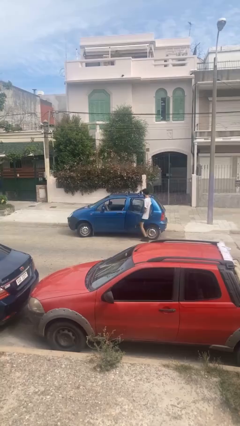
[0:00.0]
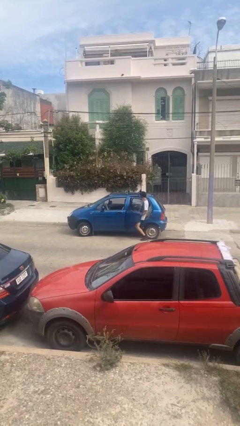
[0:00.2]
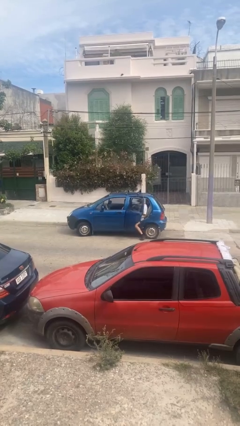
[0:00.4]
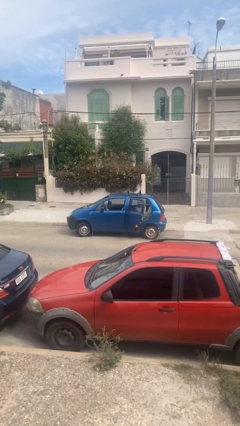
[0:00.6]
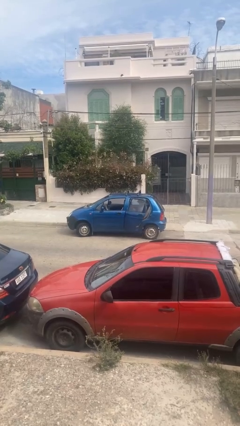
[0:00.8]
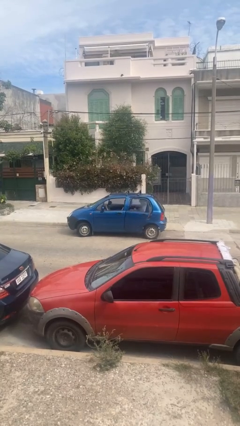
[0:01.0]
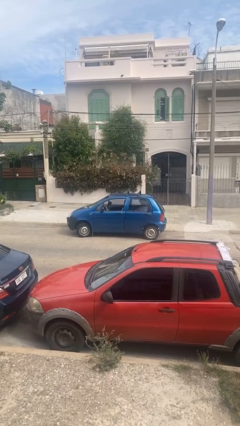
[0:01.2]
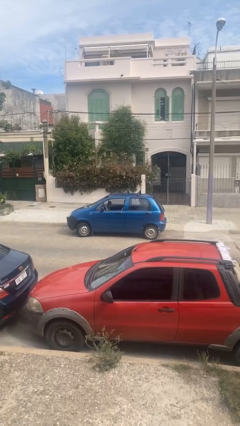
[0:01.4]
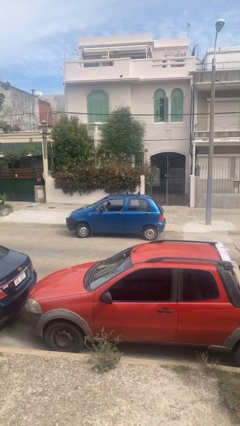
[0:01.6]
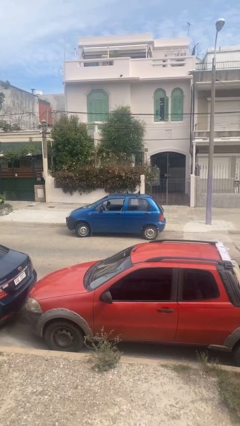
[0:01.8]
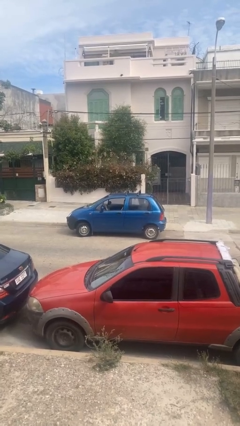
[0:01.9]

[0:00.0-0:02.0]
car picks up person

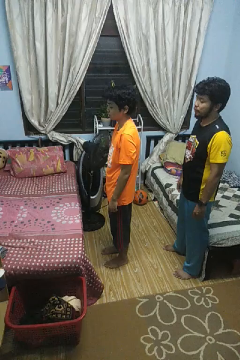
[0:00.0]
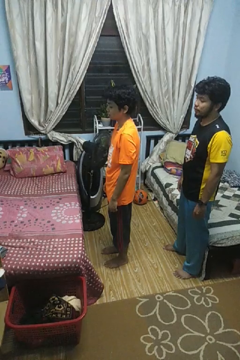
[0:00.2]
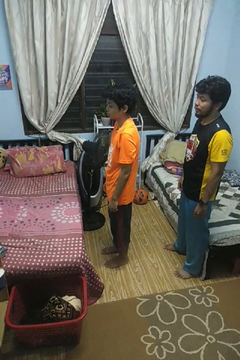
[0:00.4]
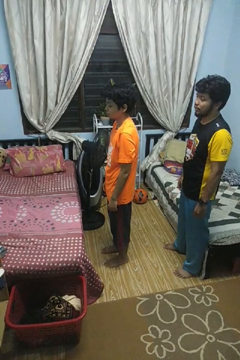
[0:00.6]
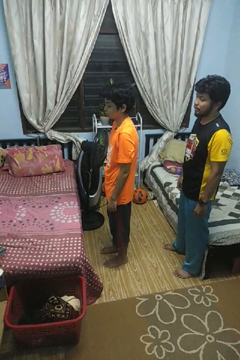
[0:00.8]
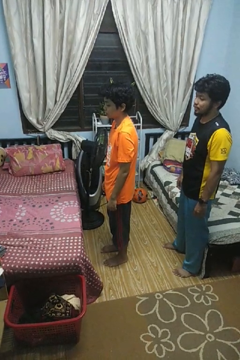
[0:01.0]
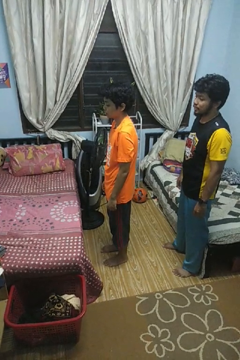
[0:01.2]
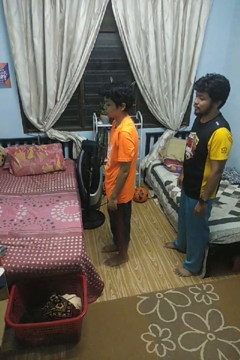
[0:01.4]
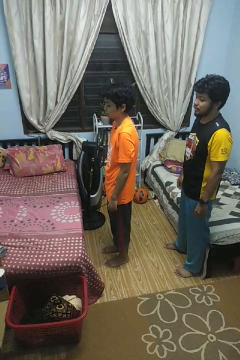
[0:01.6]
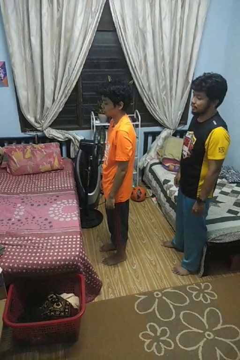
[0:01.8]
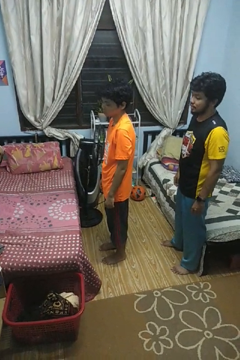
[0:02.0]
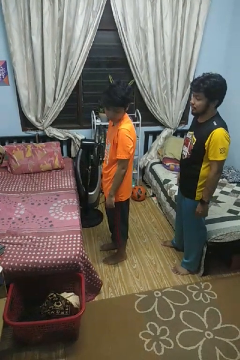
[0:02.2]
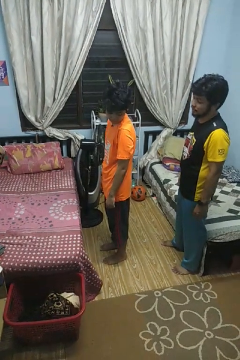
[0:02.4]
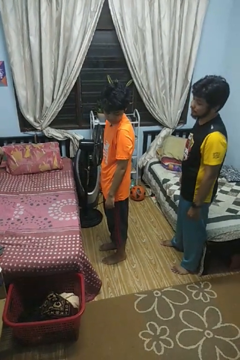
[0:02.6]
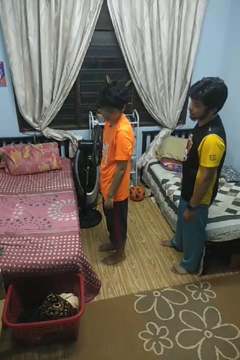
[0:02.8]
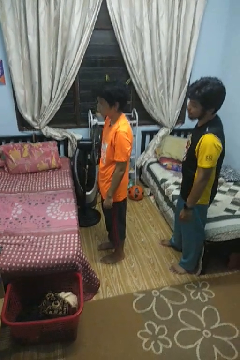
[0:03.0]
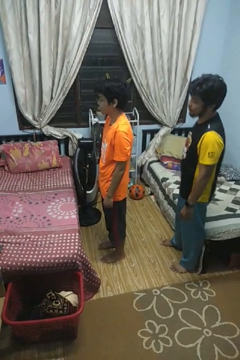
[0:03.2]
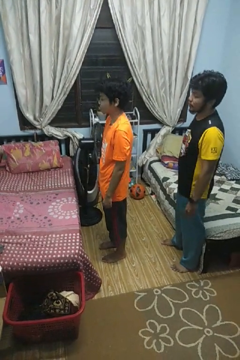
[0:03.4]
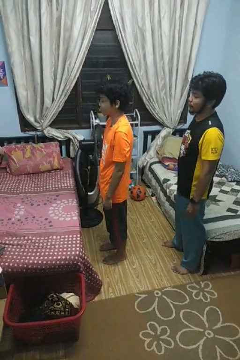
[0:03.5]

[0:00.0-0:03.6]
person looks over shoulder

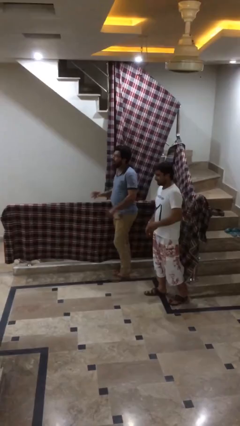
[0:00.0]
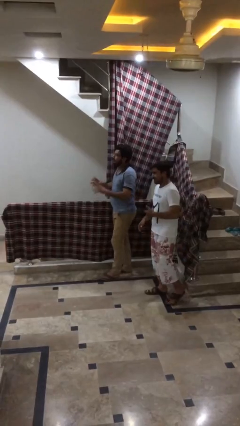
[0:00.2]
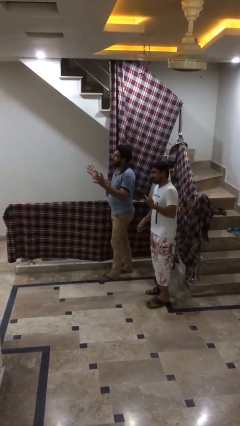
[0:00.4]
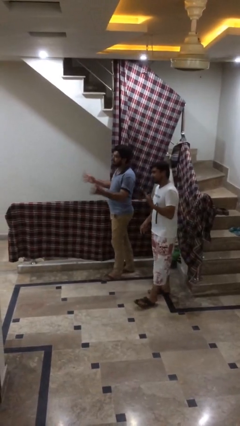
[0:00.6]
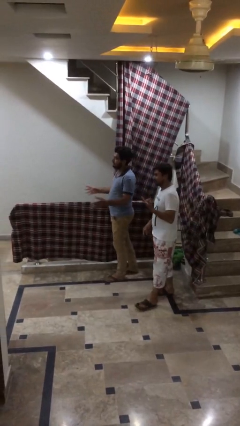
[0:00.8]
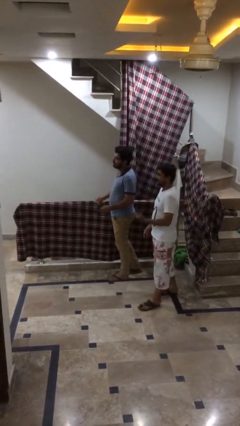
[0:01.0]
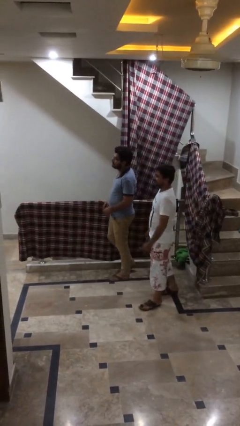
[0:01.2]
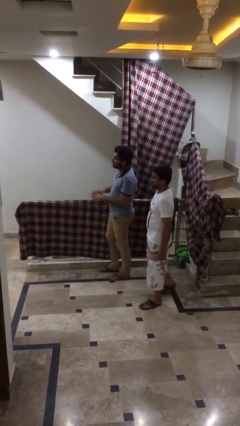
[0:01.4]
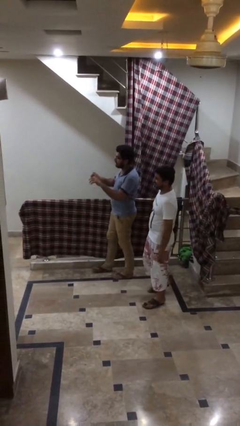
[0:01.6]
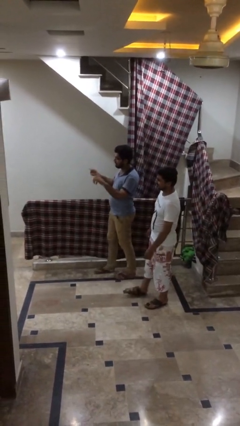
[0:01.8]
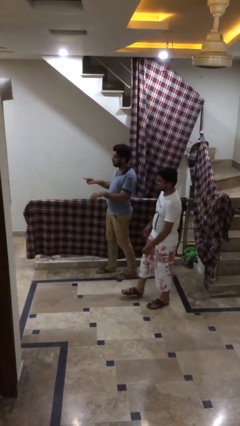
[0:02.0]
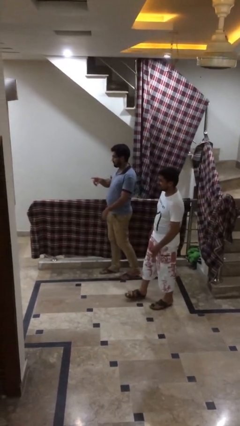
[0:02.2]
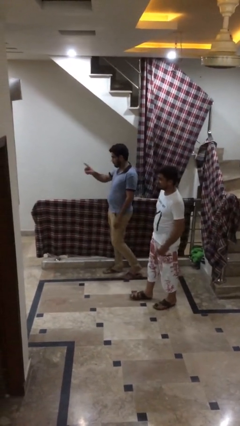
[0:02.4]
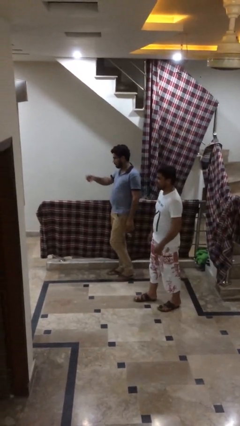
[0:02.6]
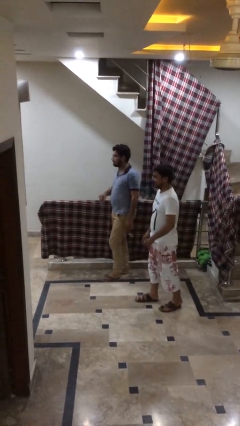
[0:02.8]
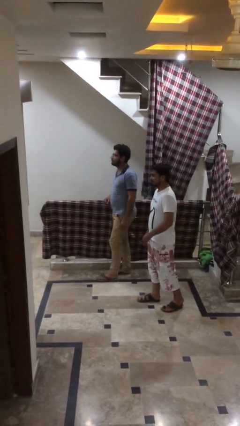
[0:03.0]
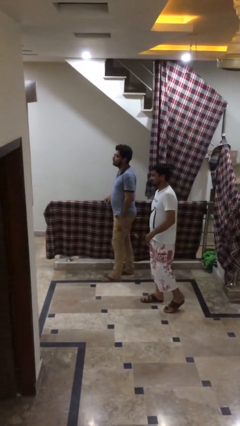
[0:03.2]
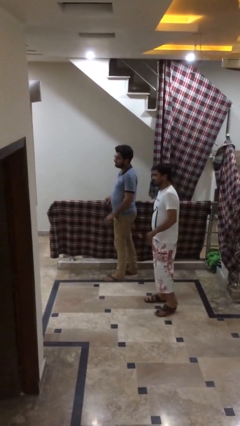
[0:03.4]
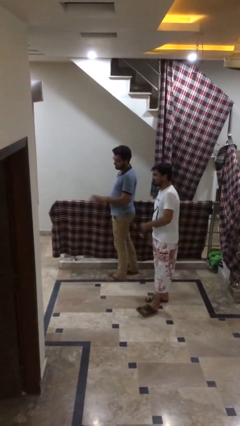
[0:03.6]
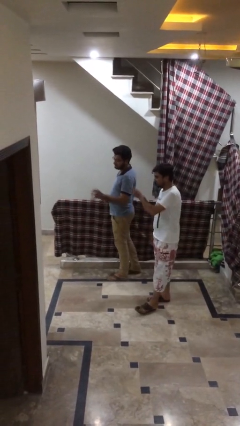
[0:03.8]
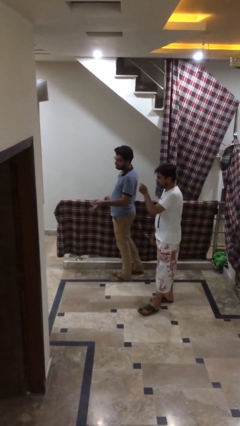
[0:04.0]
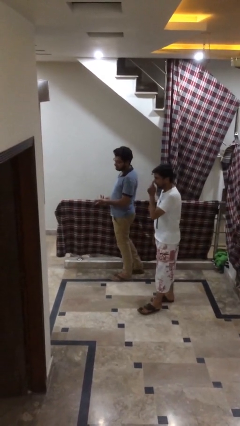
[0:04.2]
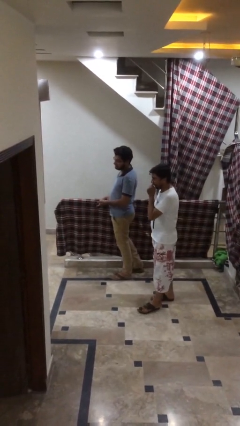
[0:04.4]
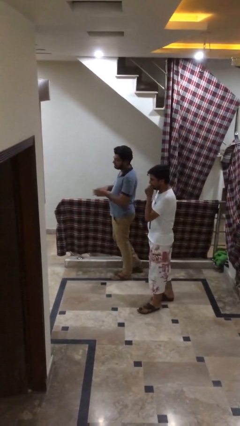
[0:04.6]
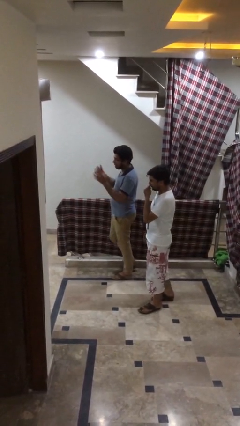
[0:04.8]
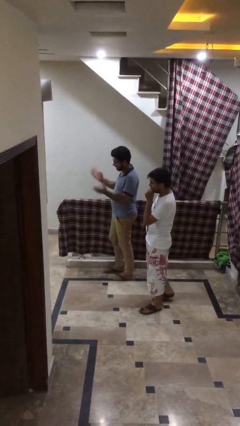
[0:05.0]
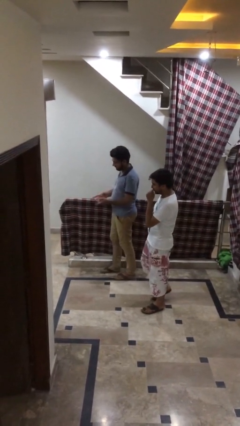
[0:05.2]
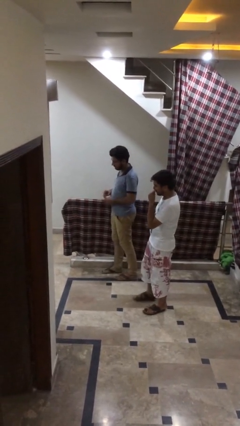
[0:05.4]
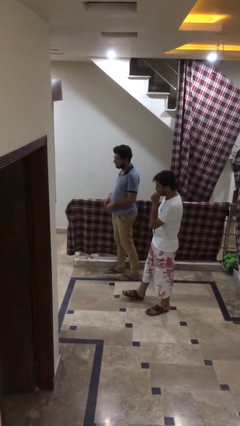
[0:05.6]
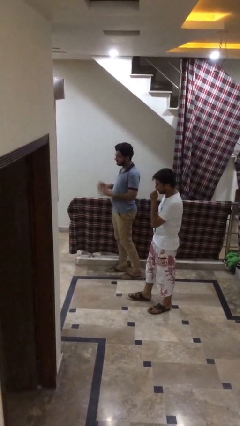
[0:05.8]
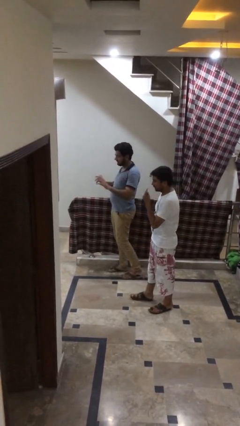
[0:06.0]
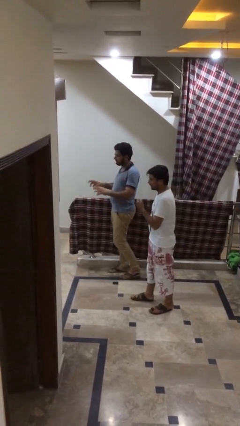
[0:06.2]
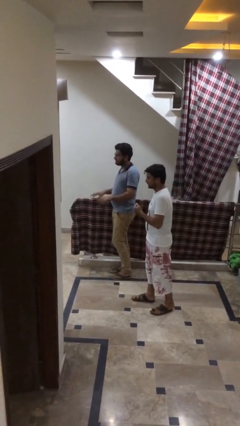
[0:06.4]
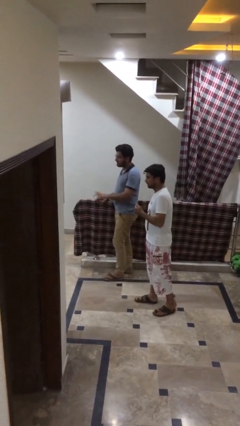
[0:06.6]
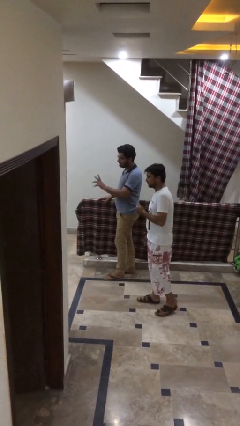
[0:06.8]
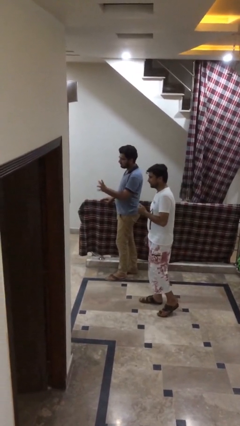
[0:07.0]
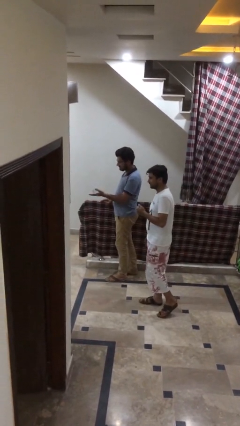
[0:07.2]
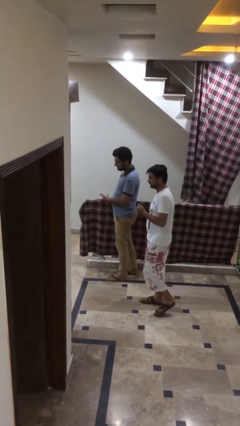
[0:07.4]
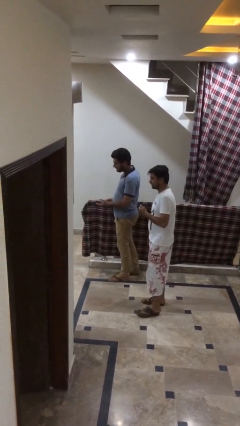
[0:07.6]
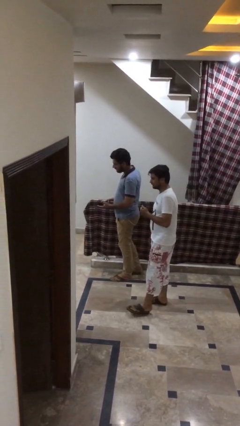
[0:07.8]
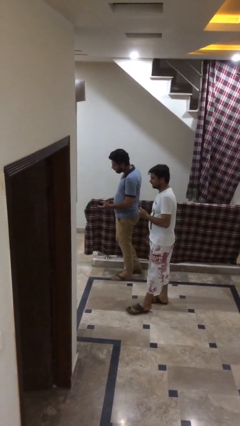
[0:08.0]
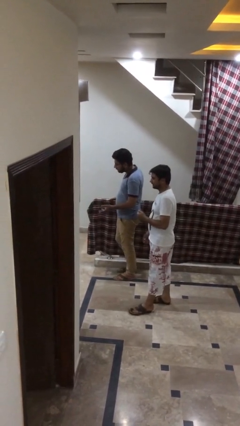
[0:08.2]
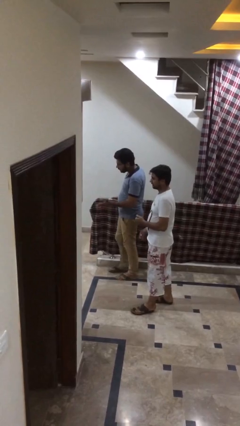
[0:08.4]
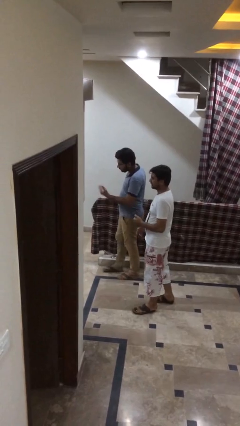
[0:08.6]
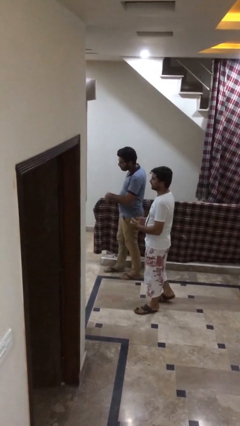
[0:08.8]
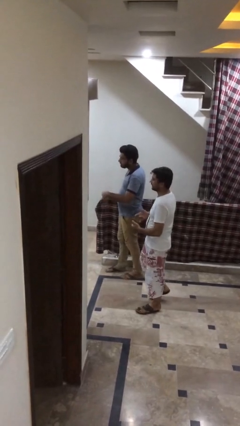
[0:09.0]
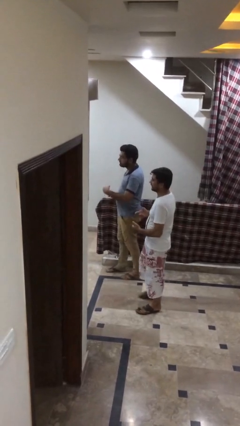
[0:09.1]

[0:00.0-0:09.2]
person talks to person

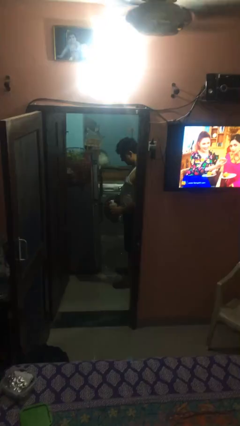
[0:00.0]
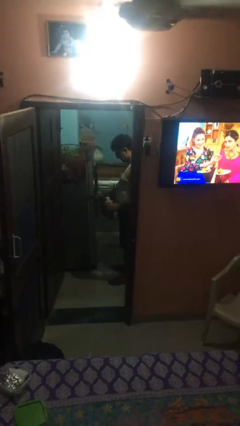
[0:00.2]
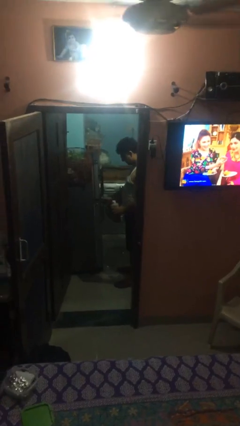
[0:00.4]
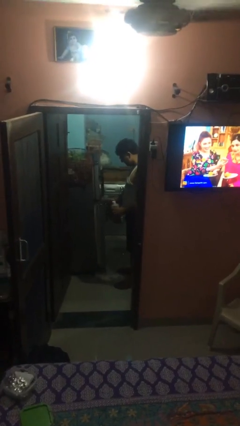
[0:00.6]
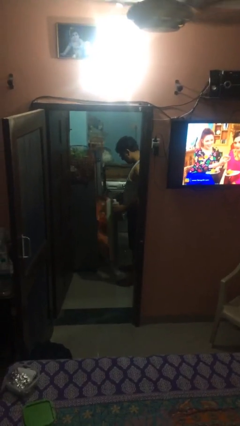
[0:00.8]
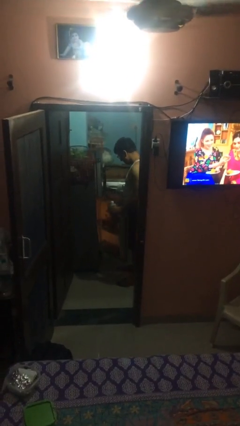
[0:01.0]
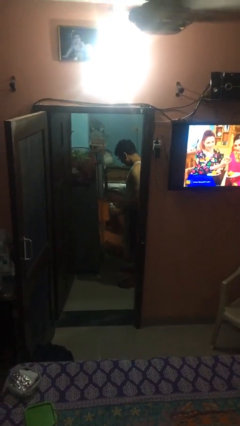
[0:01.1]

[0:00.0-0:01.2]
person opens refrigerator

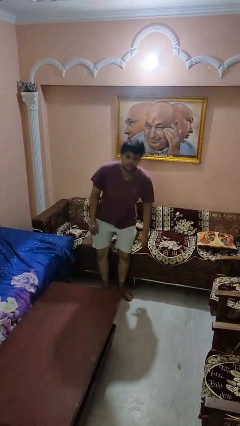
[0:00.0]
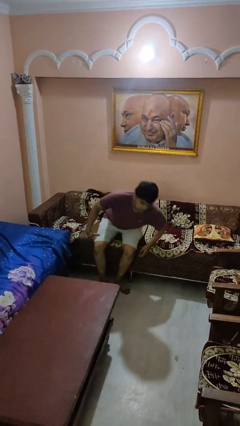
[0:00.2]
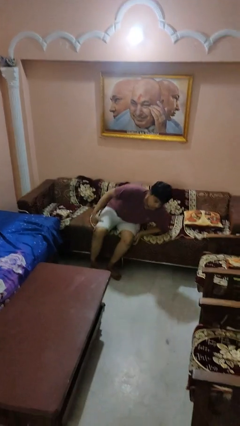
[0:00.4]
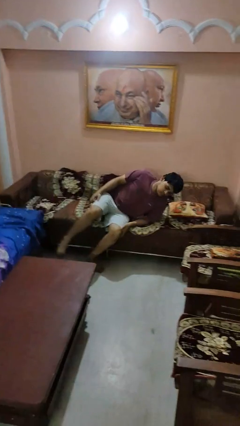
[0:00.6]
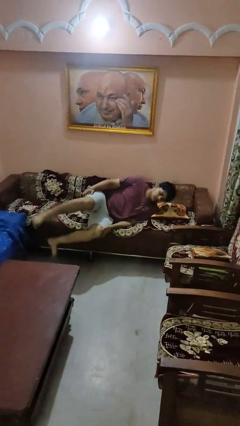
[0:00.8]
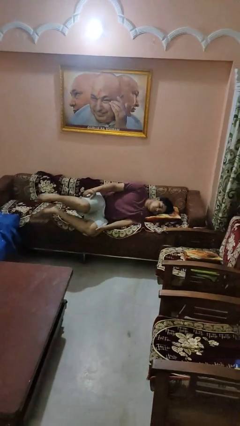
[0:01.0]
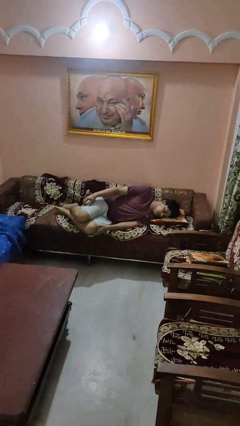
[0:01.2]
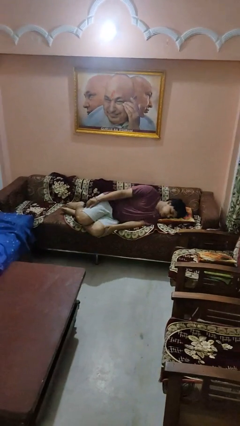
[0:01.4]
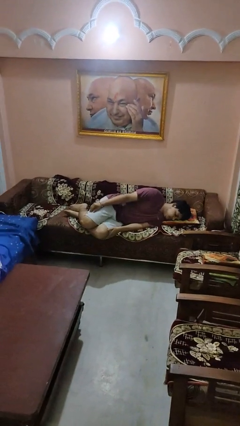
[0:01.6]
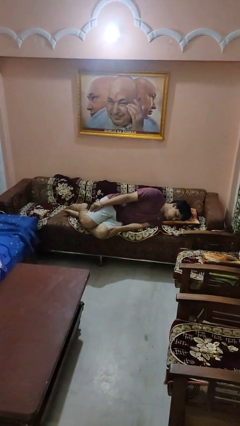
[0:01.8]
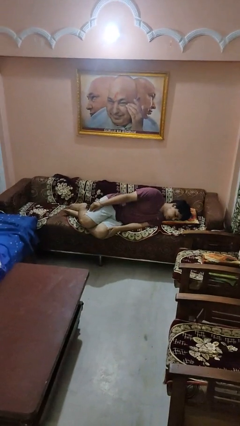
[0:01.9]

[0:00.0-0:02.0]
person lies down on couch
